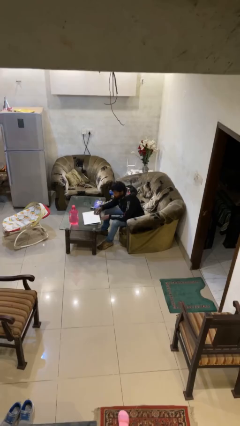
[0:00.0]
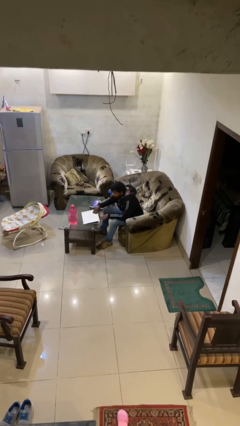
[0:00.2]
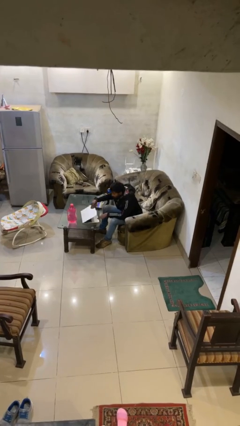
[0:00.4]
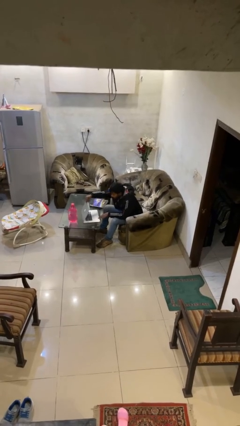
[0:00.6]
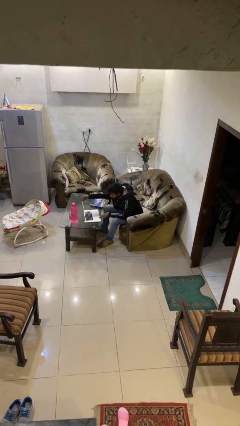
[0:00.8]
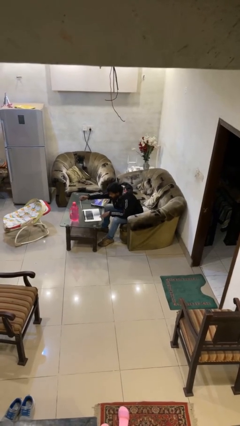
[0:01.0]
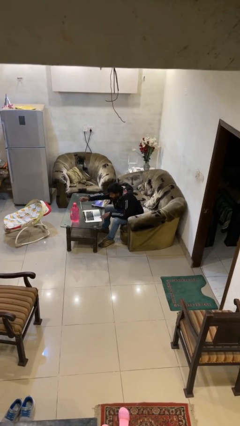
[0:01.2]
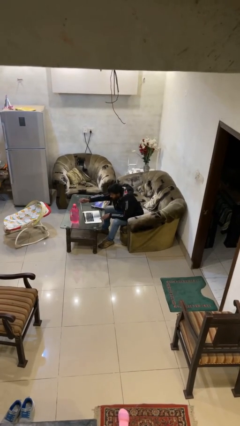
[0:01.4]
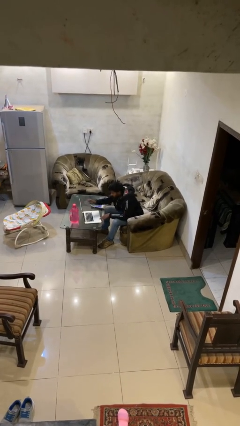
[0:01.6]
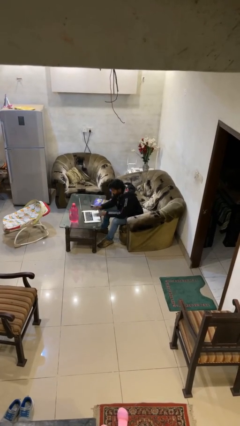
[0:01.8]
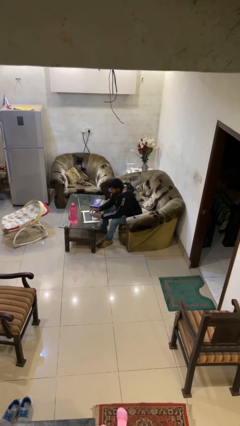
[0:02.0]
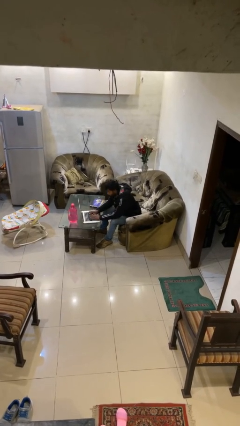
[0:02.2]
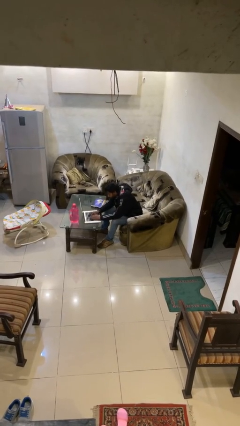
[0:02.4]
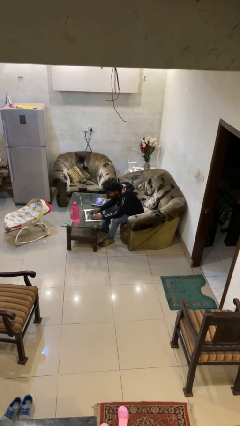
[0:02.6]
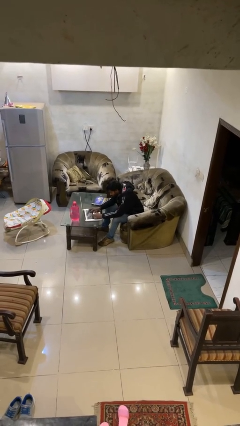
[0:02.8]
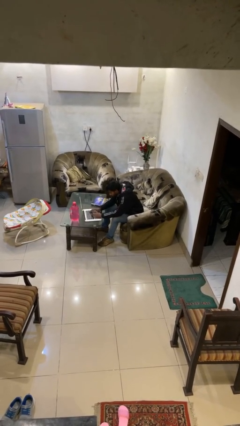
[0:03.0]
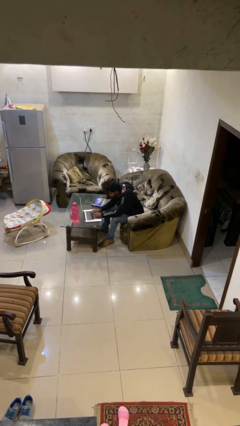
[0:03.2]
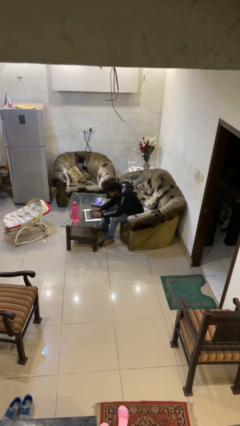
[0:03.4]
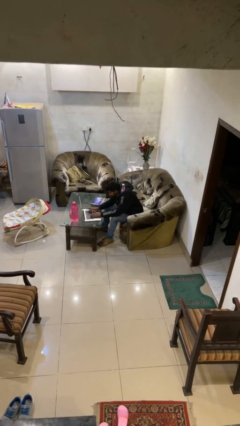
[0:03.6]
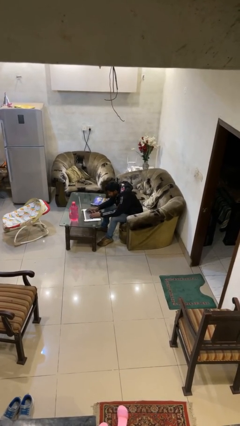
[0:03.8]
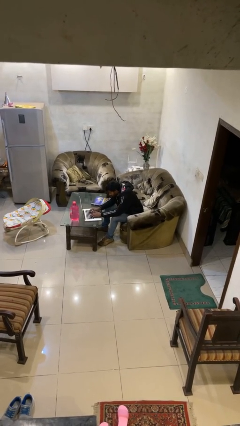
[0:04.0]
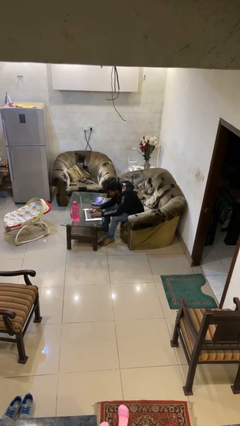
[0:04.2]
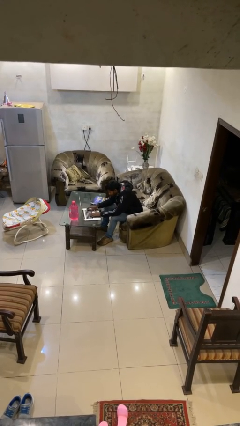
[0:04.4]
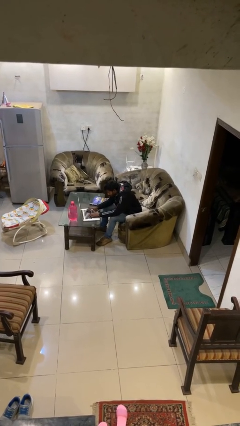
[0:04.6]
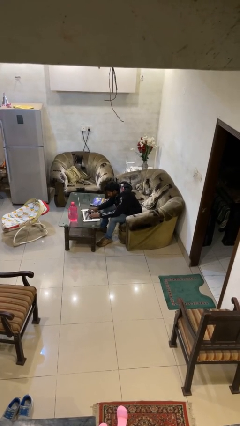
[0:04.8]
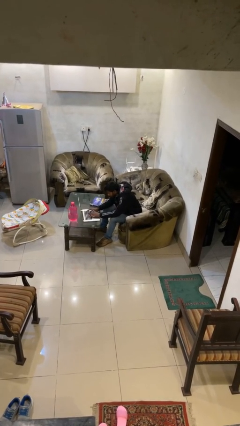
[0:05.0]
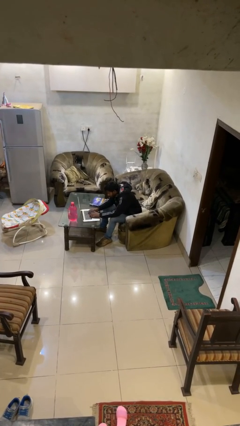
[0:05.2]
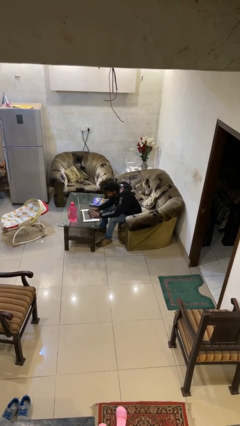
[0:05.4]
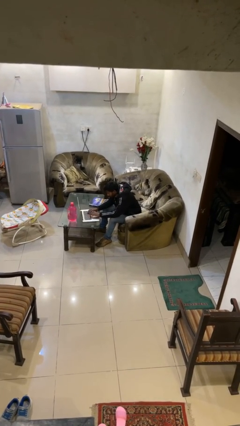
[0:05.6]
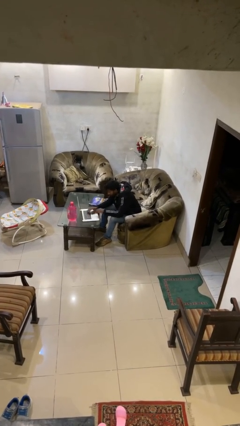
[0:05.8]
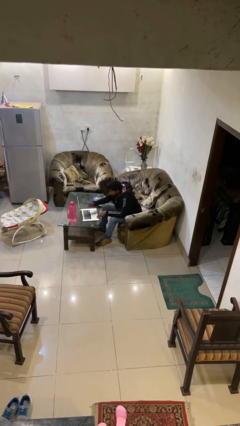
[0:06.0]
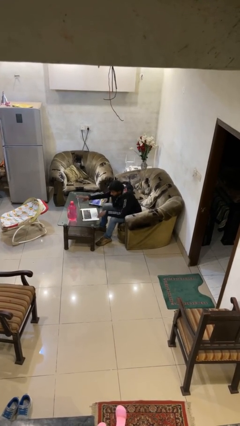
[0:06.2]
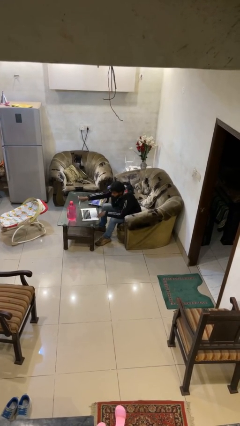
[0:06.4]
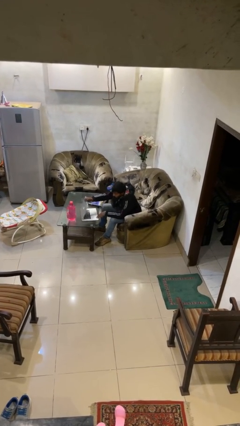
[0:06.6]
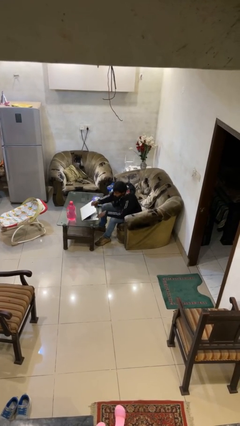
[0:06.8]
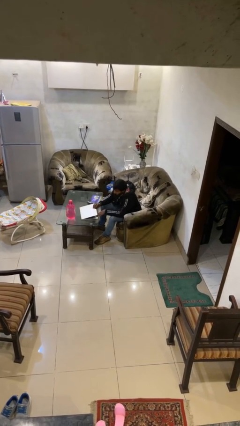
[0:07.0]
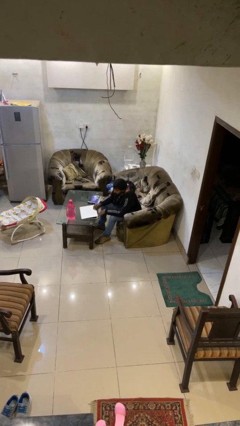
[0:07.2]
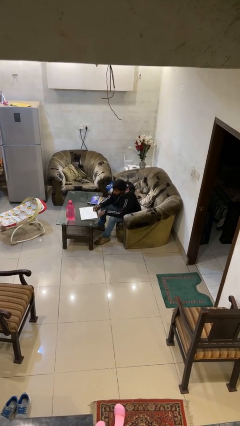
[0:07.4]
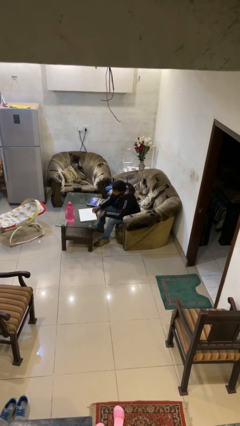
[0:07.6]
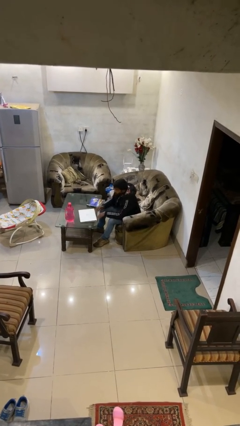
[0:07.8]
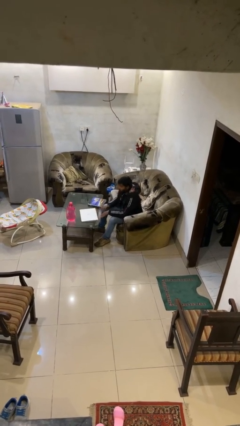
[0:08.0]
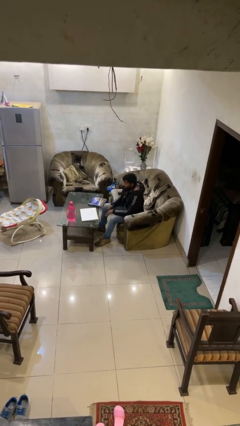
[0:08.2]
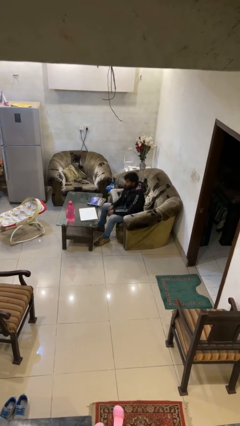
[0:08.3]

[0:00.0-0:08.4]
person interacts with laptop

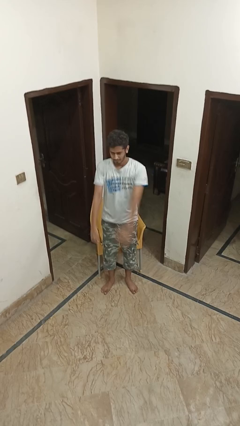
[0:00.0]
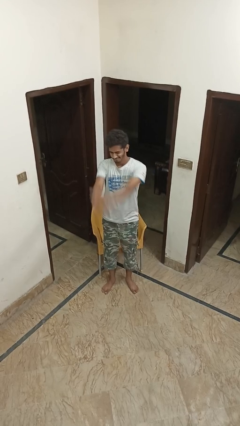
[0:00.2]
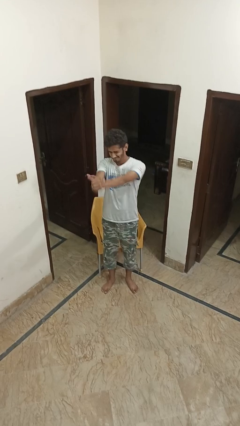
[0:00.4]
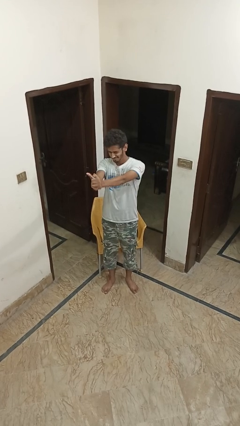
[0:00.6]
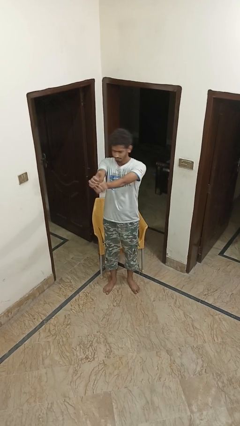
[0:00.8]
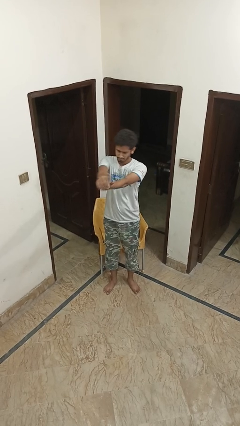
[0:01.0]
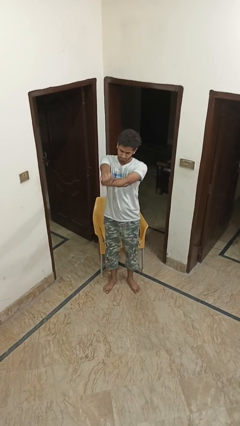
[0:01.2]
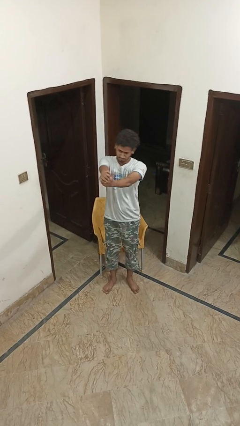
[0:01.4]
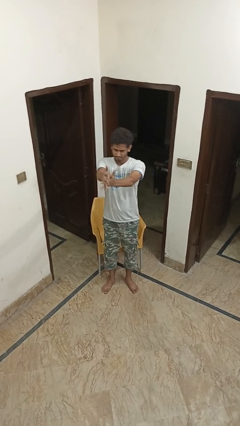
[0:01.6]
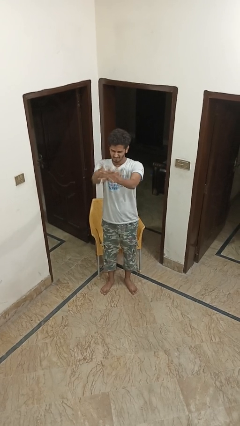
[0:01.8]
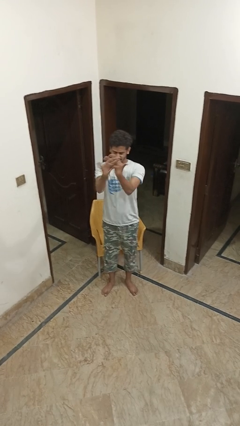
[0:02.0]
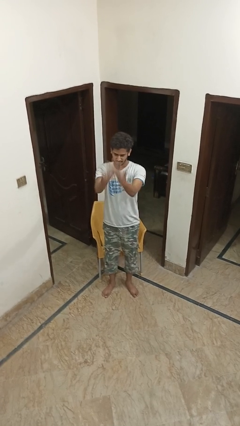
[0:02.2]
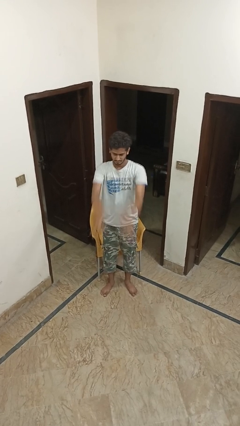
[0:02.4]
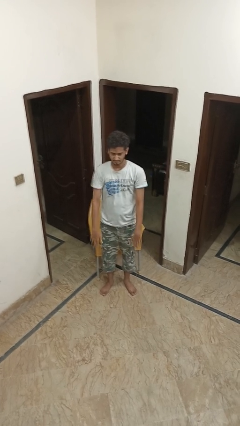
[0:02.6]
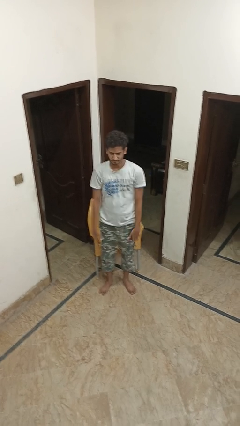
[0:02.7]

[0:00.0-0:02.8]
person cracks knuckles

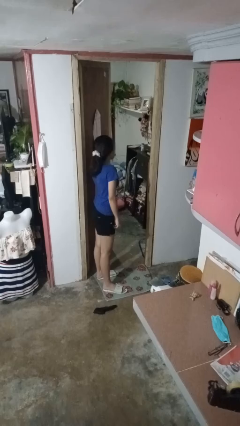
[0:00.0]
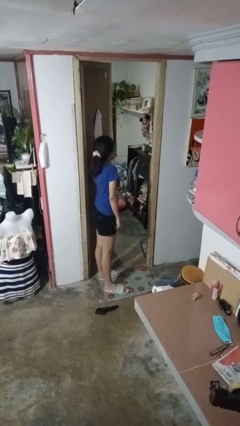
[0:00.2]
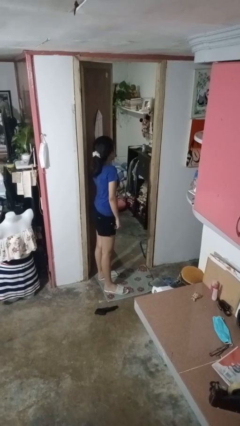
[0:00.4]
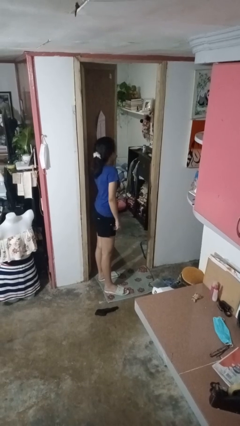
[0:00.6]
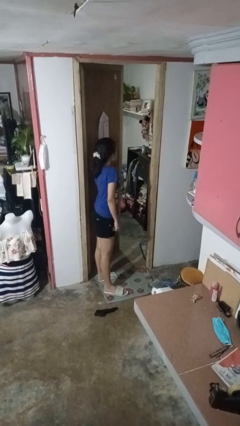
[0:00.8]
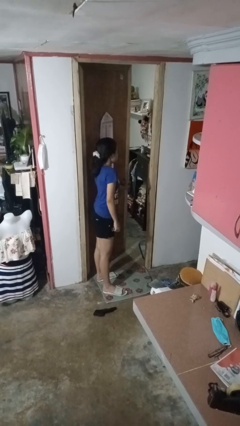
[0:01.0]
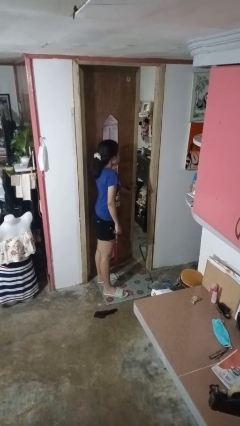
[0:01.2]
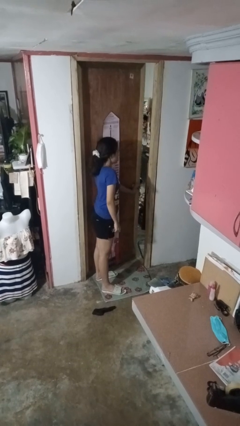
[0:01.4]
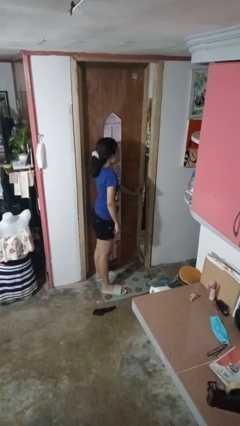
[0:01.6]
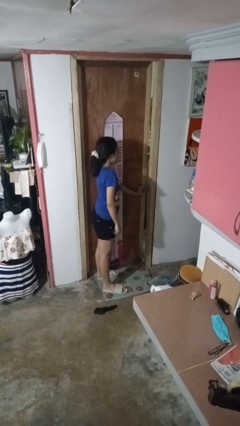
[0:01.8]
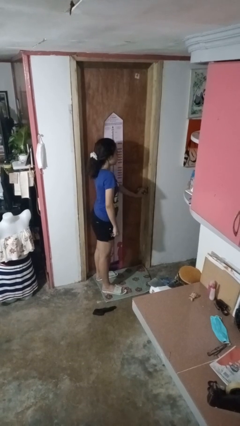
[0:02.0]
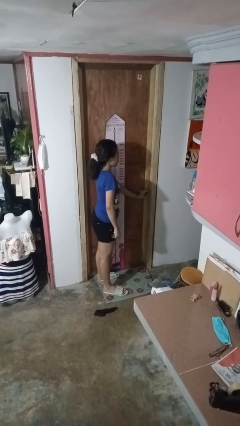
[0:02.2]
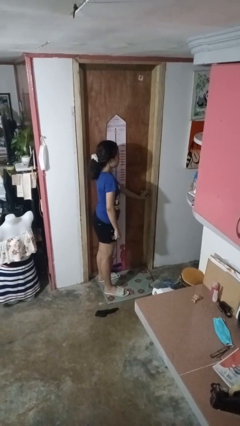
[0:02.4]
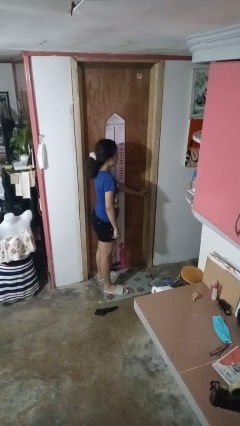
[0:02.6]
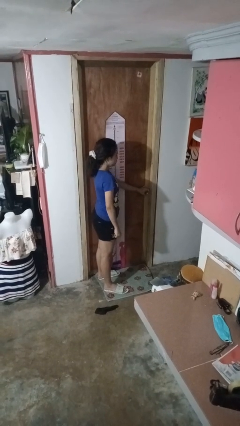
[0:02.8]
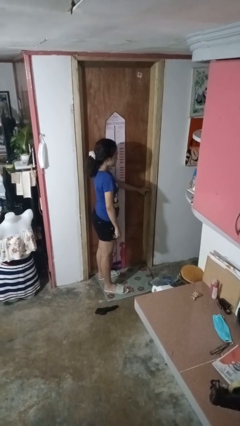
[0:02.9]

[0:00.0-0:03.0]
person closes facility door

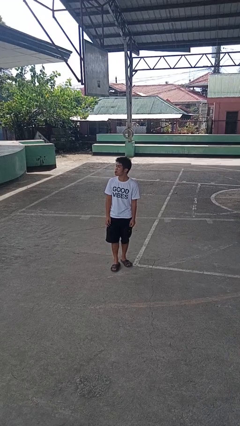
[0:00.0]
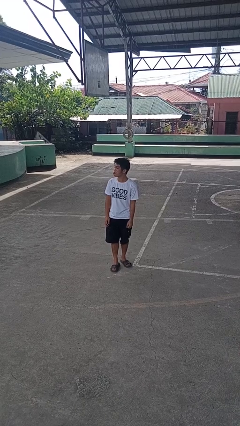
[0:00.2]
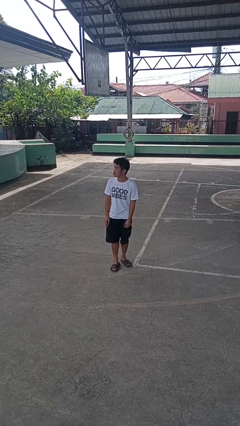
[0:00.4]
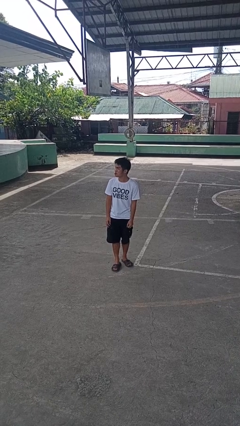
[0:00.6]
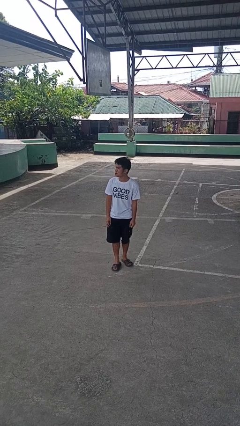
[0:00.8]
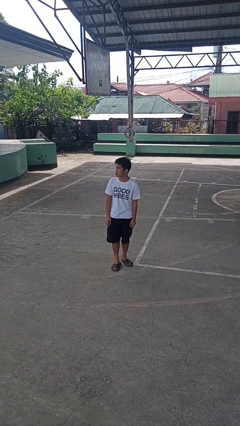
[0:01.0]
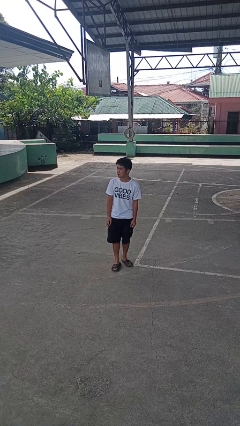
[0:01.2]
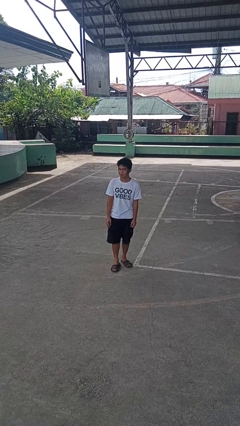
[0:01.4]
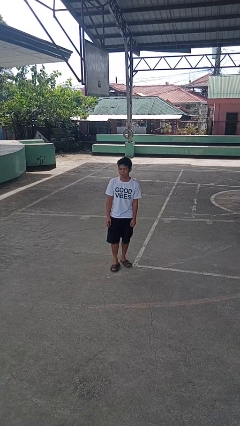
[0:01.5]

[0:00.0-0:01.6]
person sticks out tongue

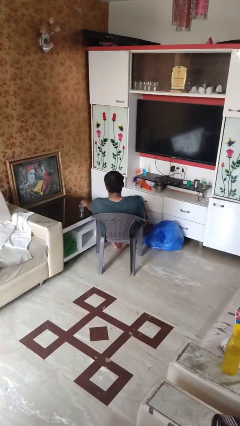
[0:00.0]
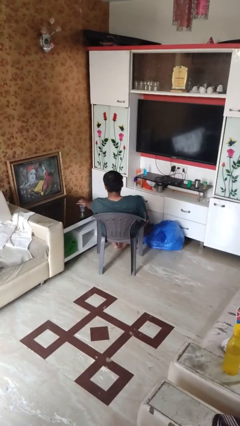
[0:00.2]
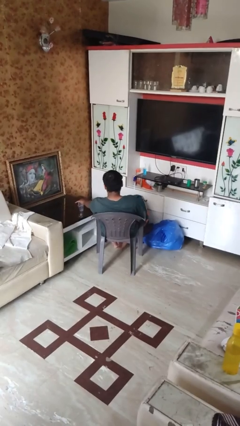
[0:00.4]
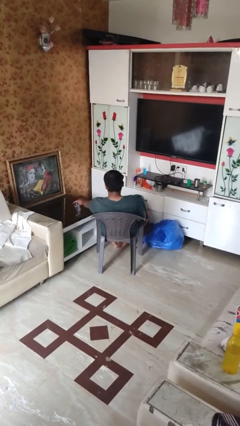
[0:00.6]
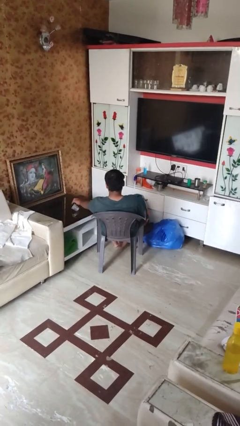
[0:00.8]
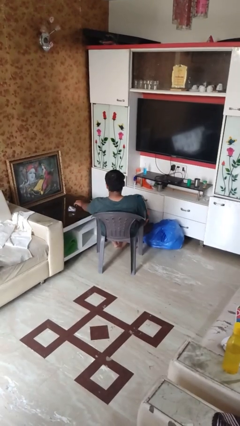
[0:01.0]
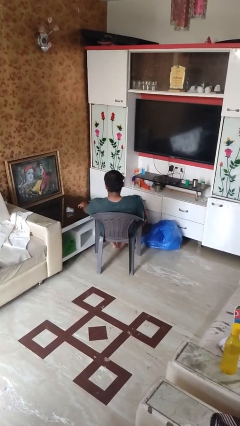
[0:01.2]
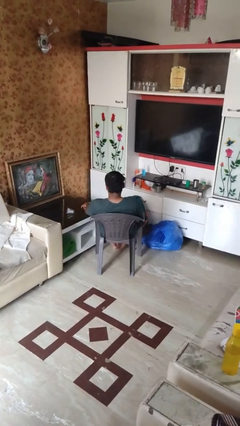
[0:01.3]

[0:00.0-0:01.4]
person knocks over glass
